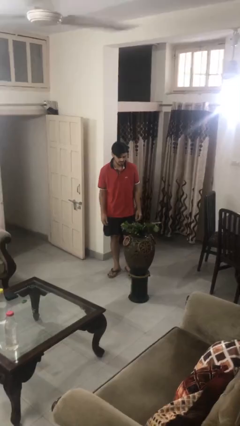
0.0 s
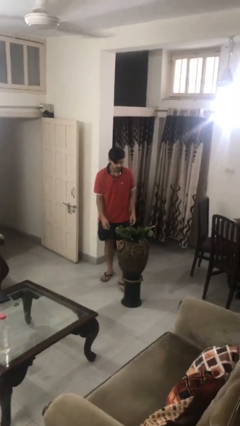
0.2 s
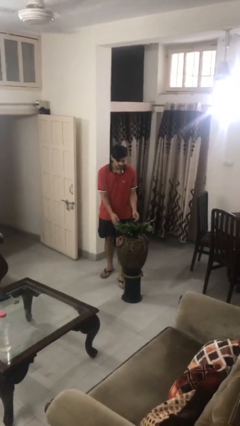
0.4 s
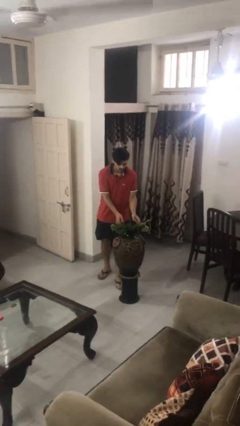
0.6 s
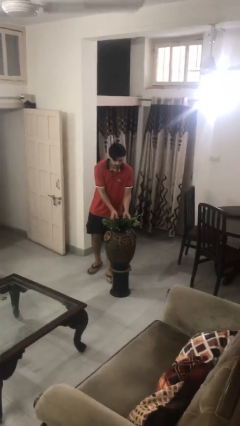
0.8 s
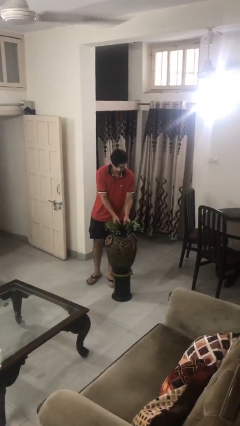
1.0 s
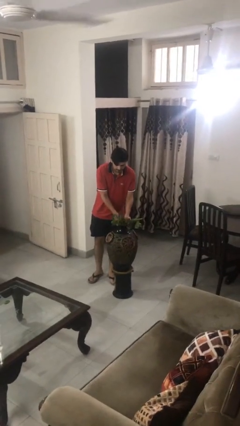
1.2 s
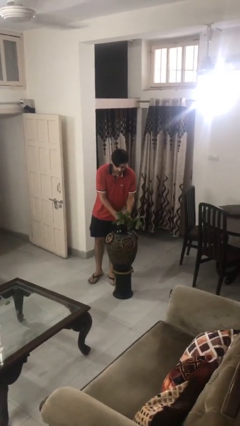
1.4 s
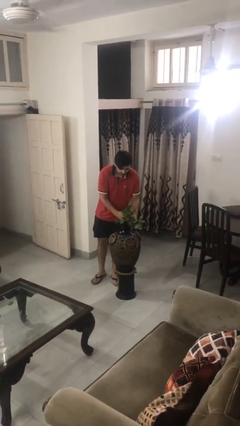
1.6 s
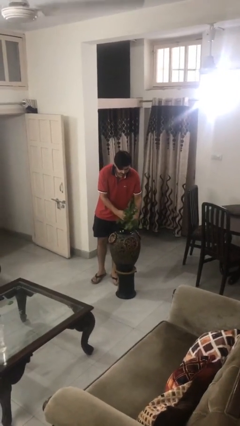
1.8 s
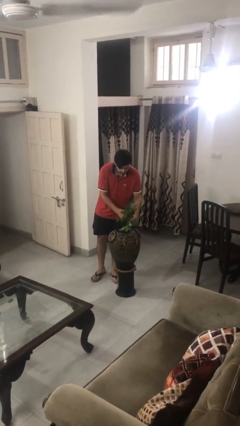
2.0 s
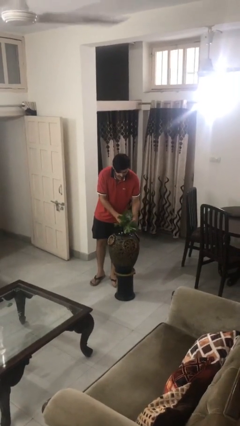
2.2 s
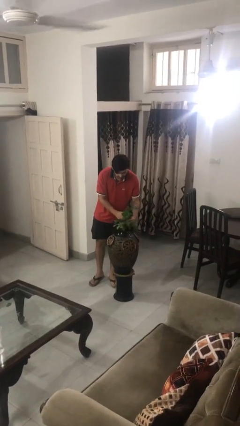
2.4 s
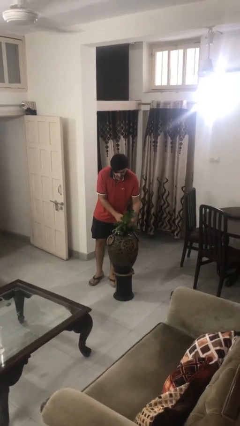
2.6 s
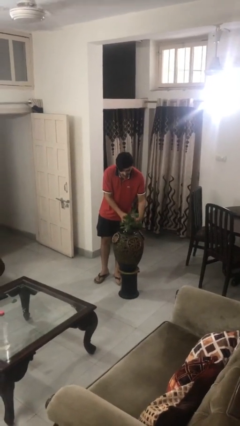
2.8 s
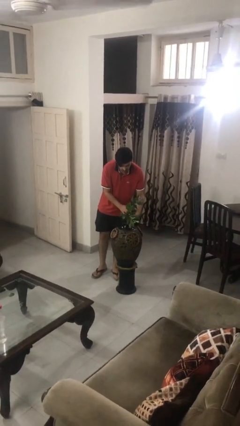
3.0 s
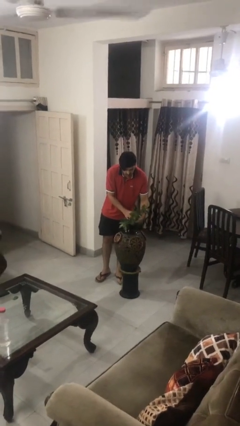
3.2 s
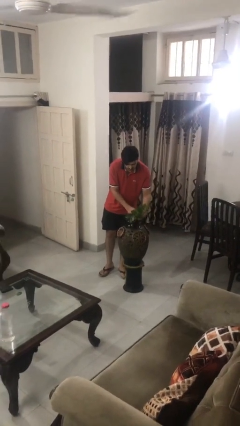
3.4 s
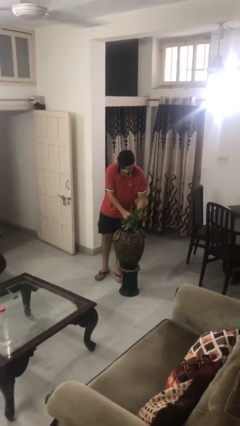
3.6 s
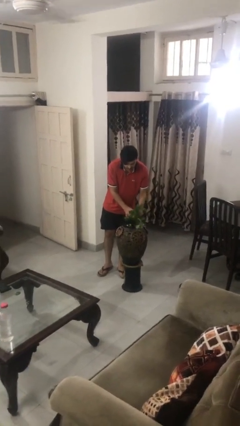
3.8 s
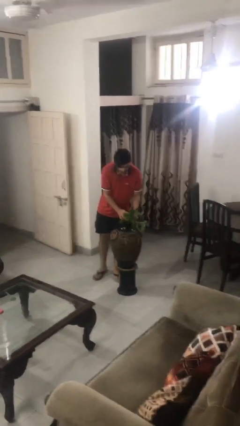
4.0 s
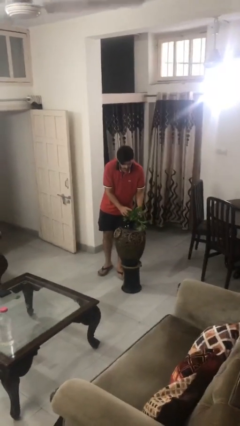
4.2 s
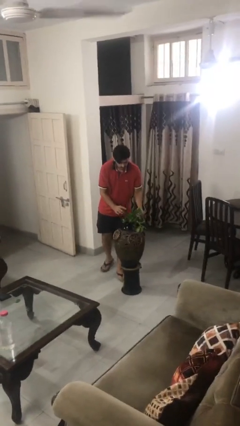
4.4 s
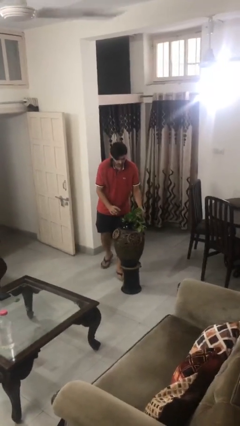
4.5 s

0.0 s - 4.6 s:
person arranges flowers in vase

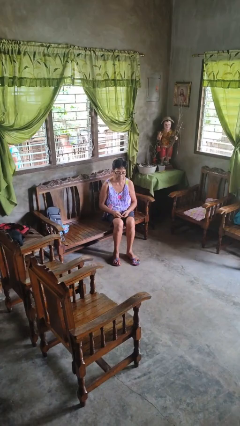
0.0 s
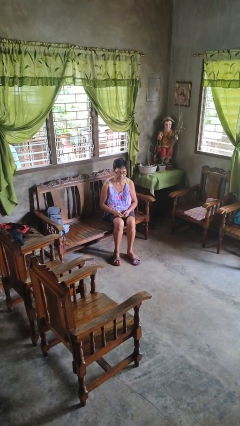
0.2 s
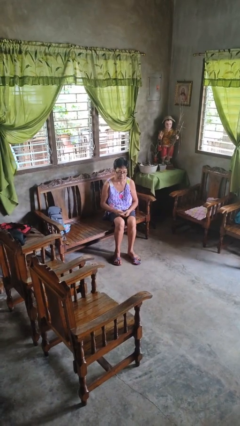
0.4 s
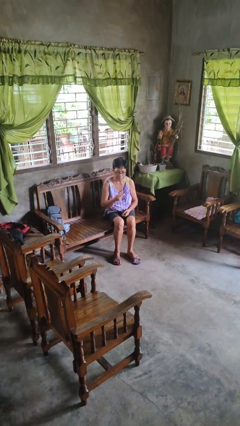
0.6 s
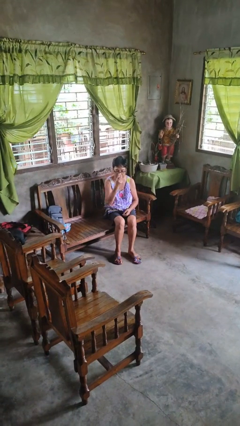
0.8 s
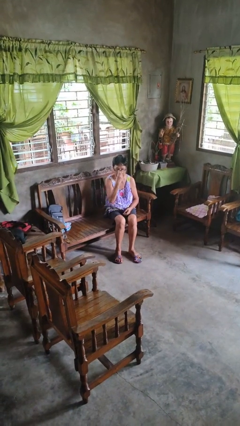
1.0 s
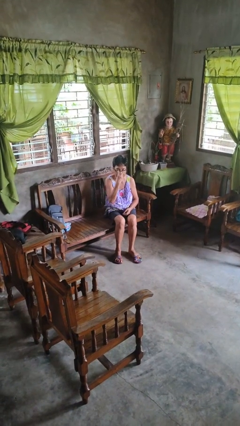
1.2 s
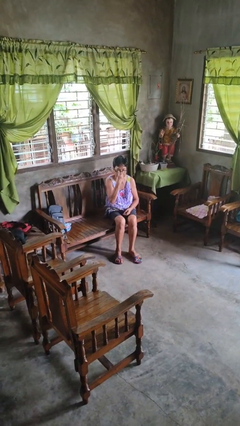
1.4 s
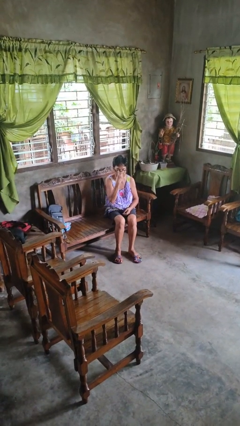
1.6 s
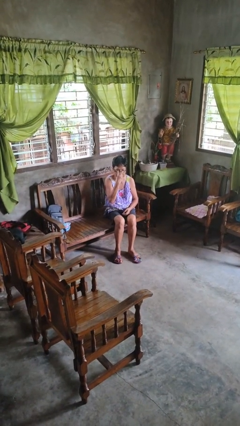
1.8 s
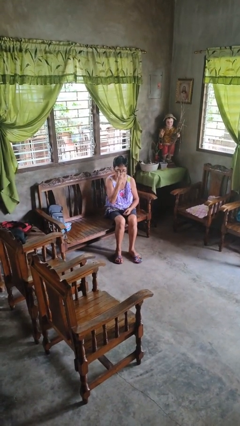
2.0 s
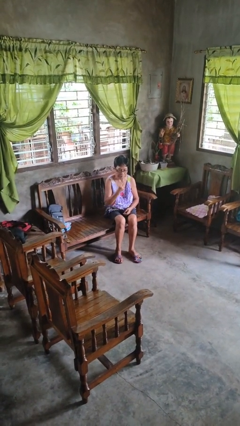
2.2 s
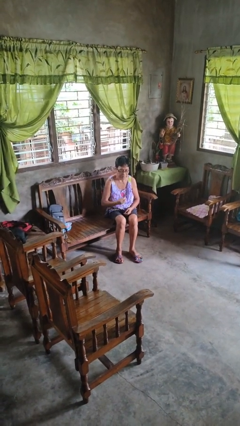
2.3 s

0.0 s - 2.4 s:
person gestures watch closely

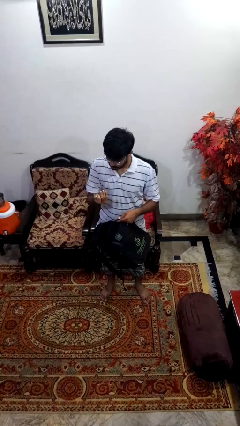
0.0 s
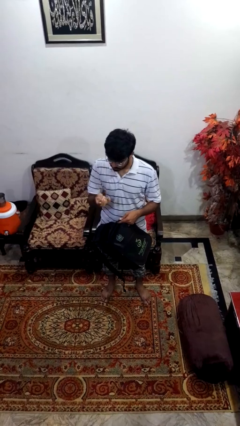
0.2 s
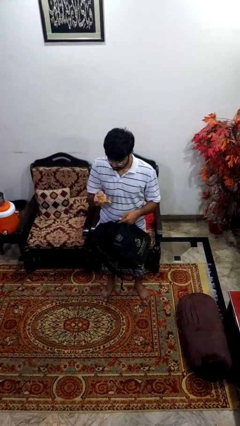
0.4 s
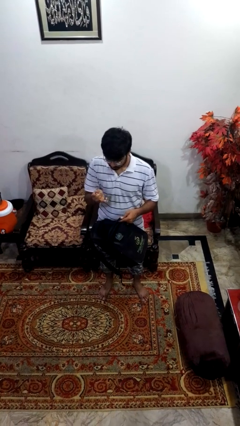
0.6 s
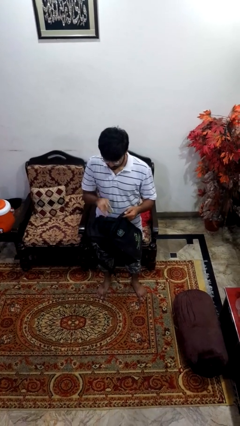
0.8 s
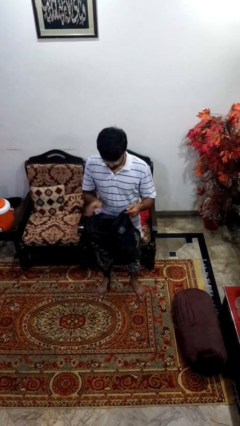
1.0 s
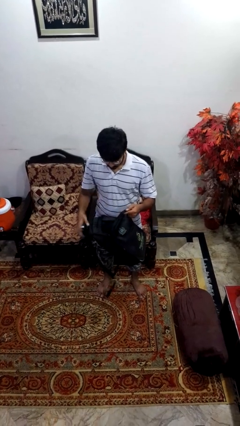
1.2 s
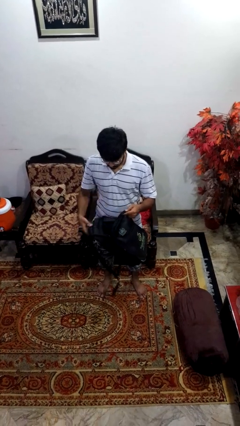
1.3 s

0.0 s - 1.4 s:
person puts object into backpack

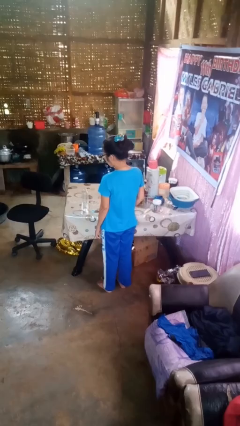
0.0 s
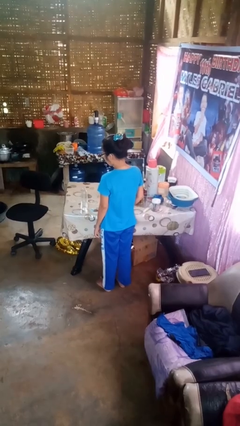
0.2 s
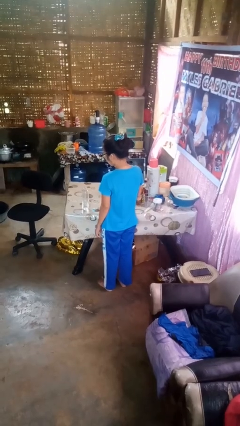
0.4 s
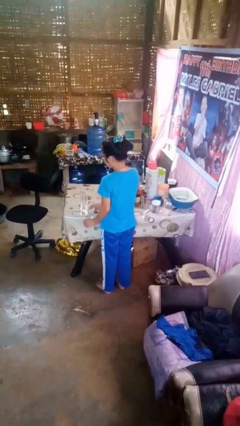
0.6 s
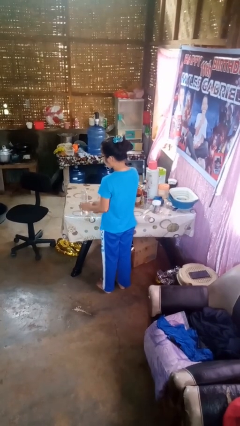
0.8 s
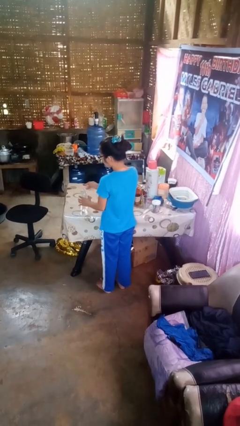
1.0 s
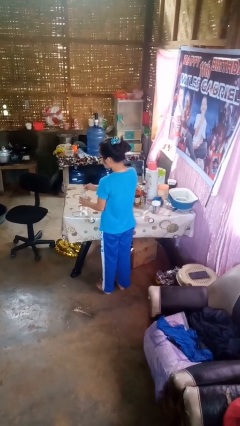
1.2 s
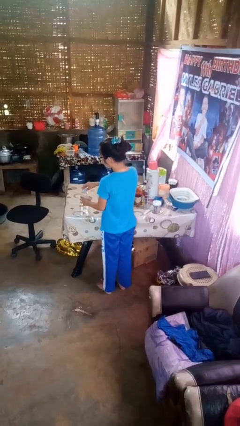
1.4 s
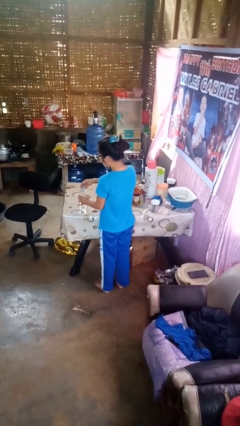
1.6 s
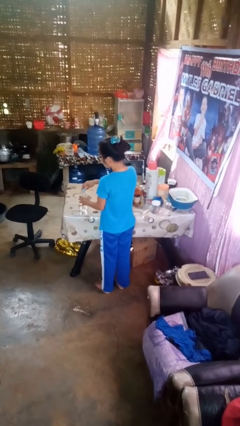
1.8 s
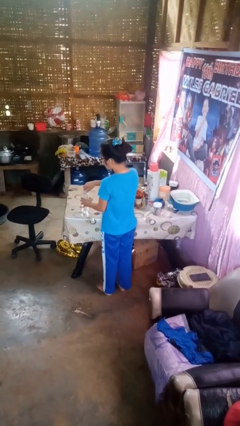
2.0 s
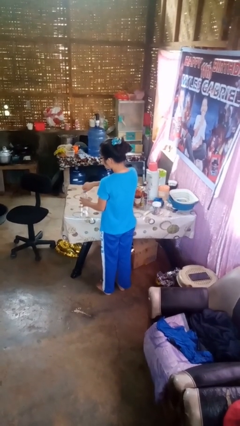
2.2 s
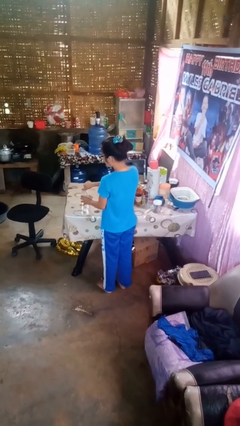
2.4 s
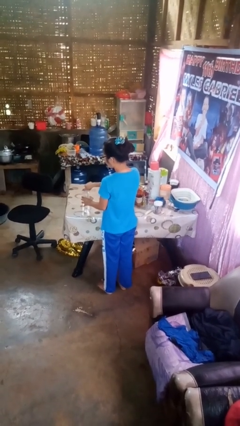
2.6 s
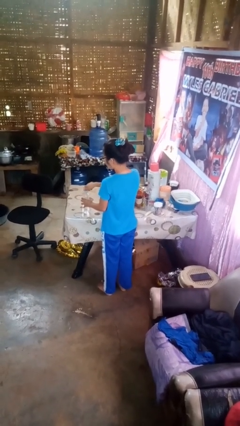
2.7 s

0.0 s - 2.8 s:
person screws lid to bottle

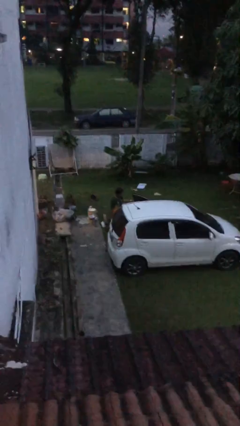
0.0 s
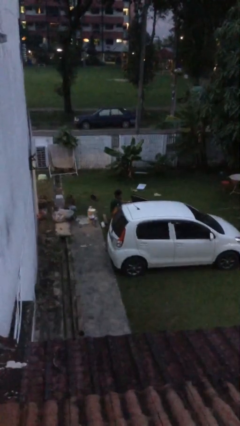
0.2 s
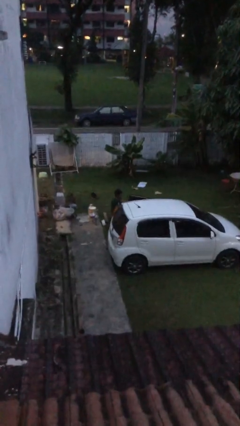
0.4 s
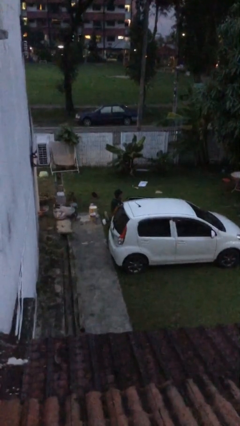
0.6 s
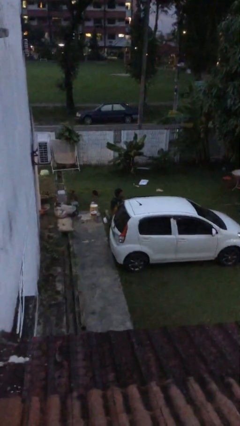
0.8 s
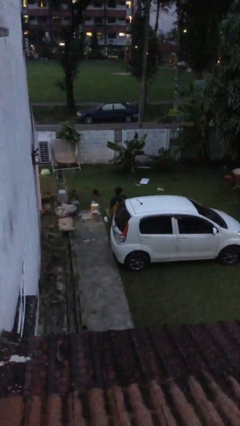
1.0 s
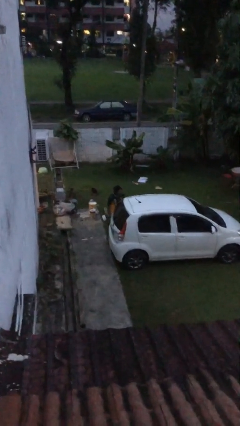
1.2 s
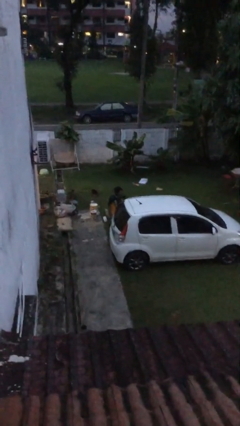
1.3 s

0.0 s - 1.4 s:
person closes car door

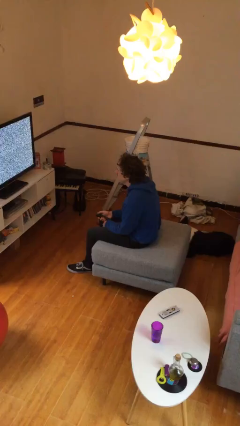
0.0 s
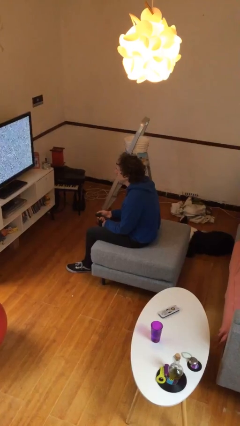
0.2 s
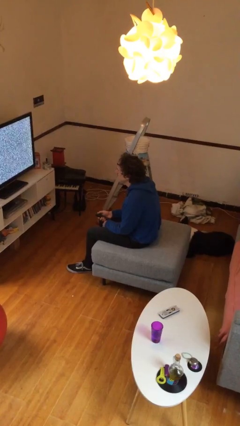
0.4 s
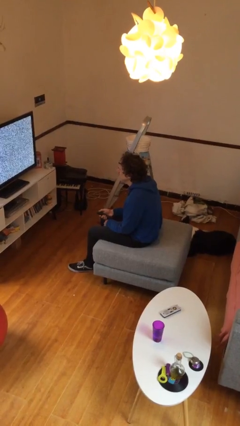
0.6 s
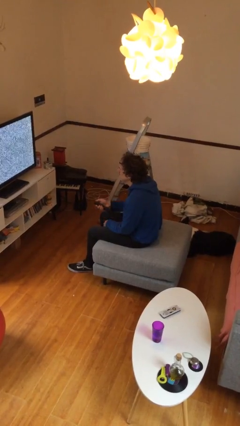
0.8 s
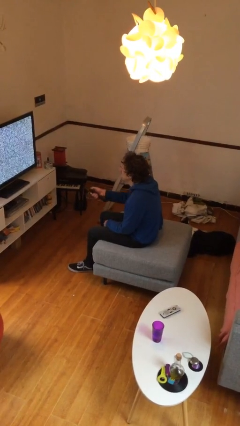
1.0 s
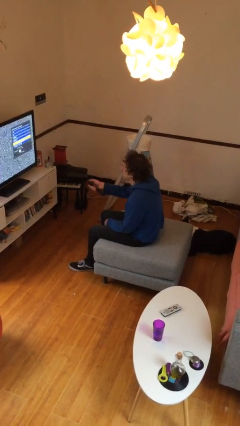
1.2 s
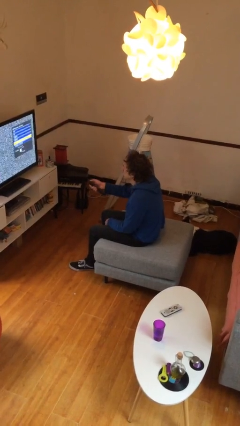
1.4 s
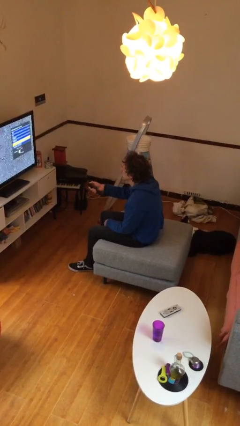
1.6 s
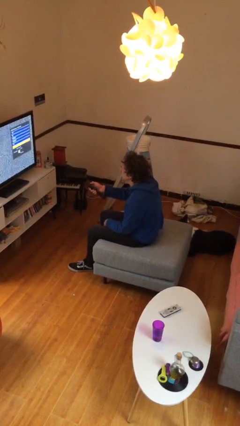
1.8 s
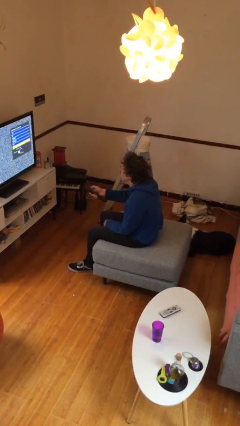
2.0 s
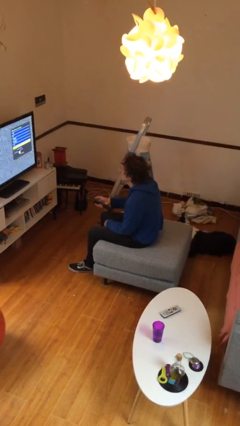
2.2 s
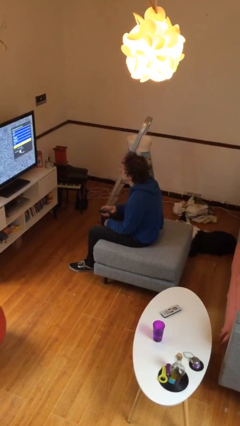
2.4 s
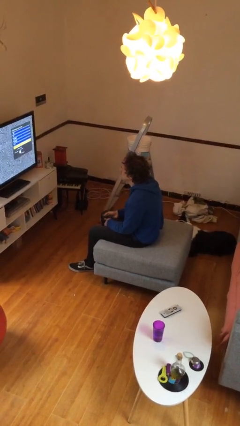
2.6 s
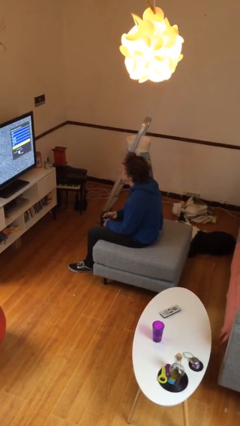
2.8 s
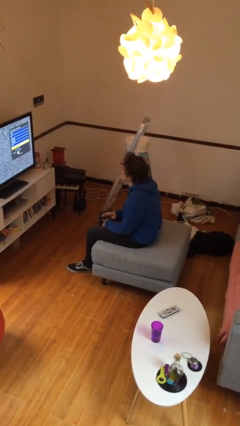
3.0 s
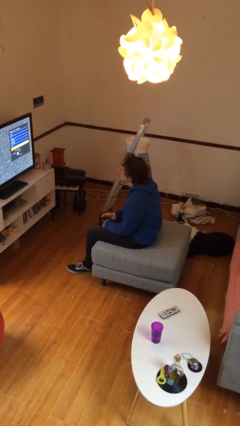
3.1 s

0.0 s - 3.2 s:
person uses television remote

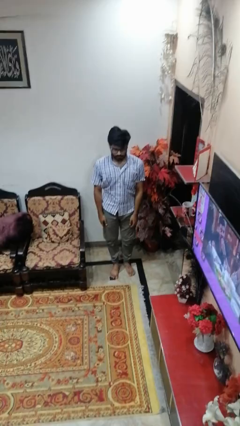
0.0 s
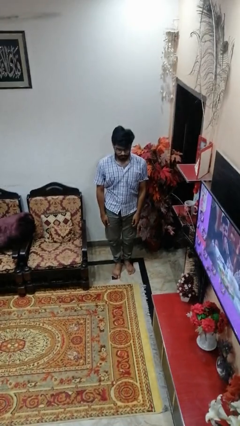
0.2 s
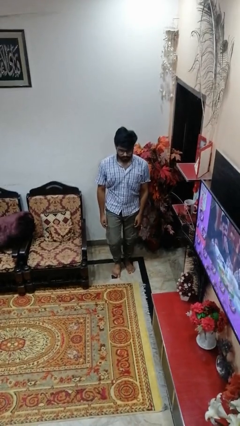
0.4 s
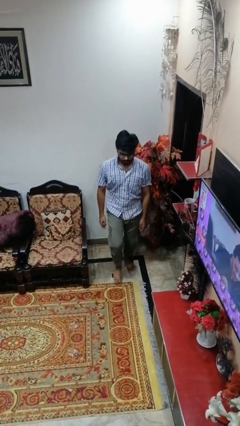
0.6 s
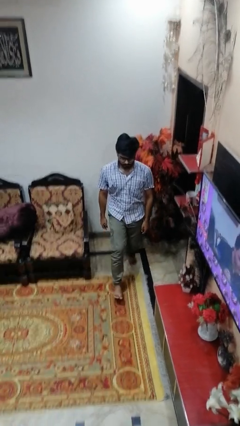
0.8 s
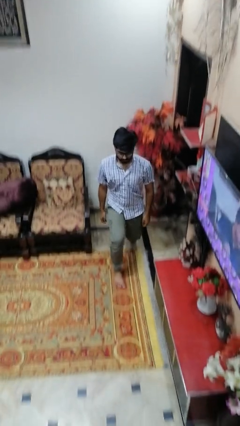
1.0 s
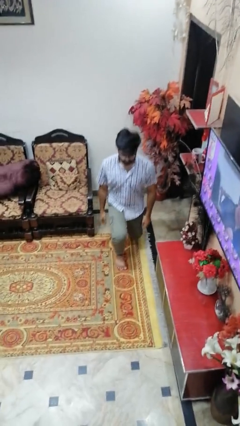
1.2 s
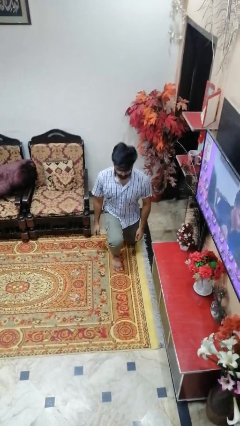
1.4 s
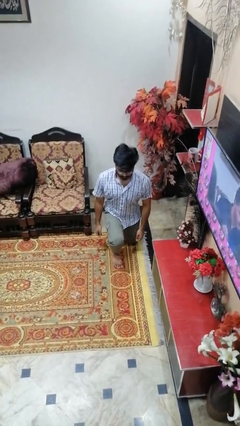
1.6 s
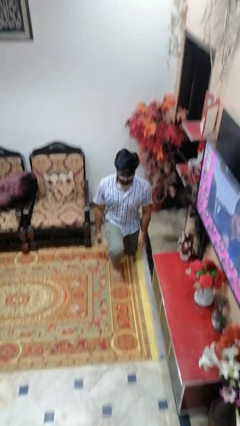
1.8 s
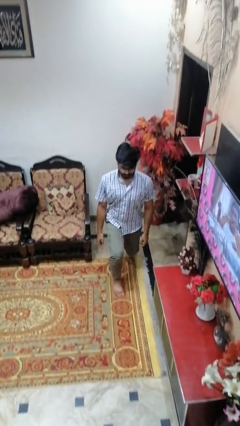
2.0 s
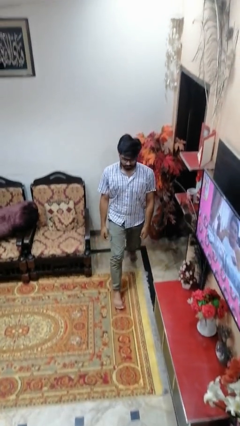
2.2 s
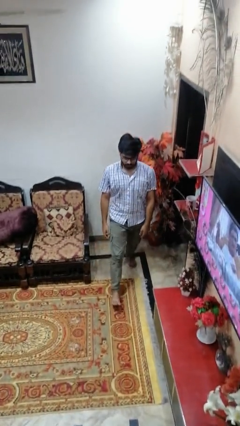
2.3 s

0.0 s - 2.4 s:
person exercises with lunges
